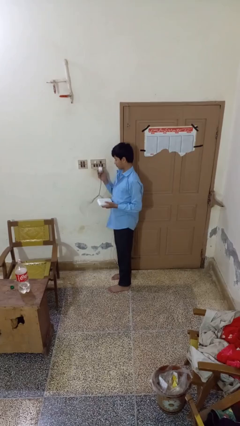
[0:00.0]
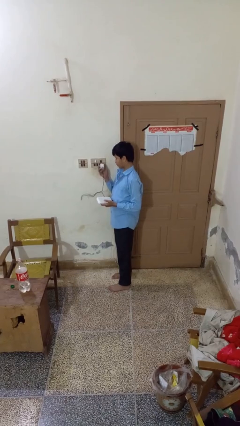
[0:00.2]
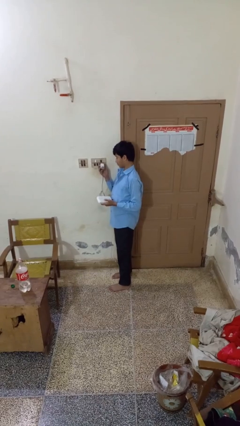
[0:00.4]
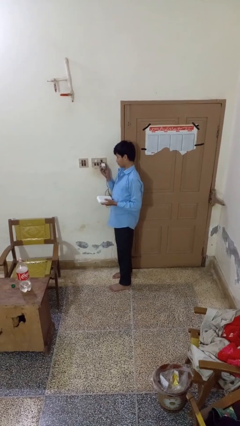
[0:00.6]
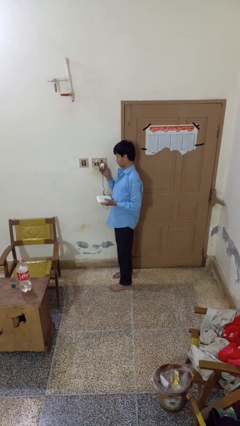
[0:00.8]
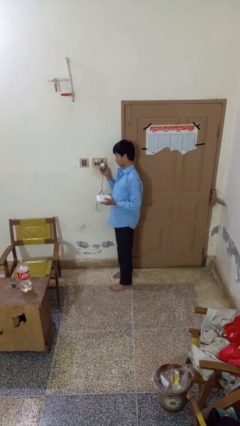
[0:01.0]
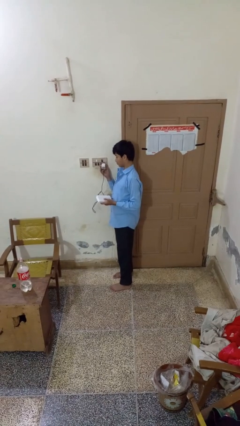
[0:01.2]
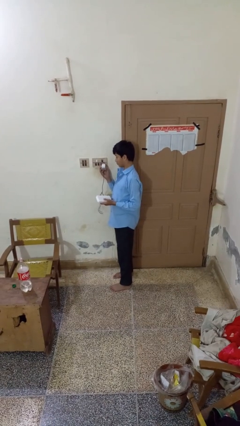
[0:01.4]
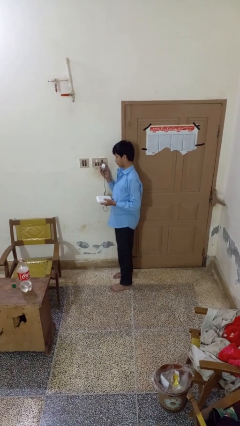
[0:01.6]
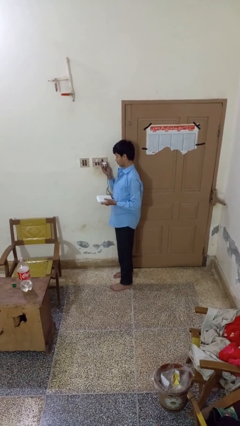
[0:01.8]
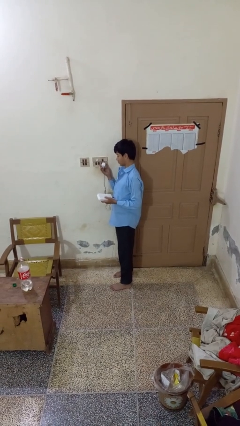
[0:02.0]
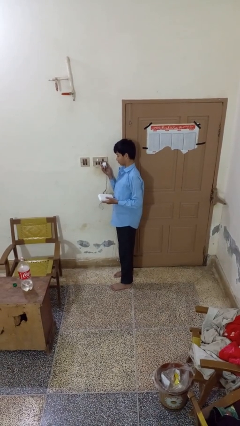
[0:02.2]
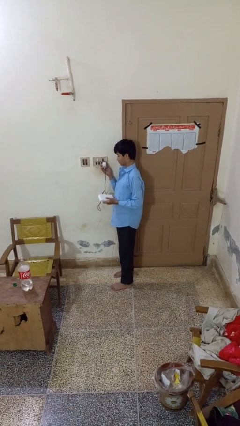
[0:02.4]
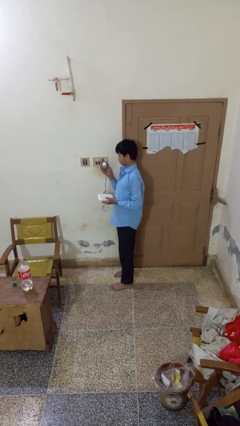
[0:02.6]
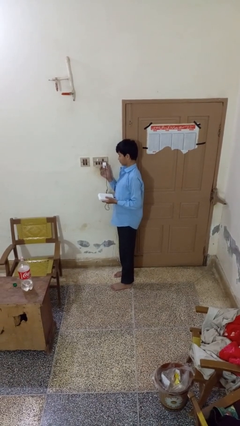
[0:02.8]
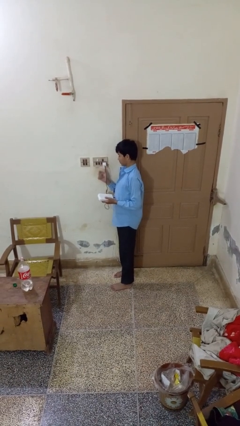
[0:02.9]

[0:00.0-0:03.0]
person plugs into electrical socket

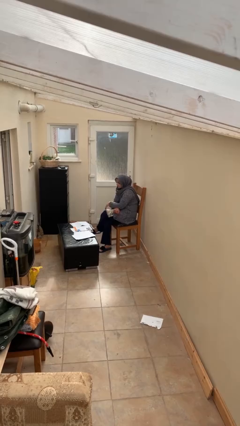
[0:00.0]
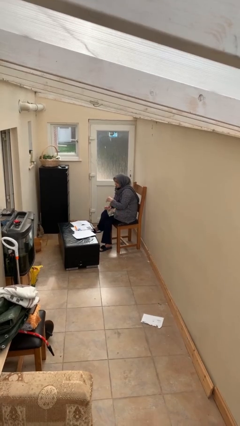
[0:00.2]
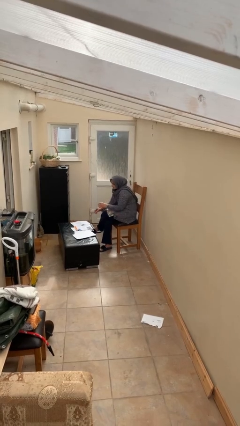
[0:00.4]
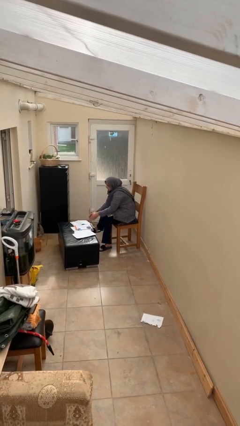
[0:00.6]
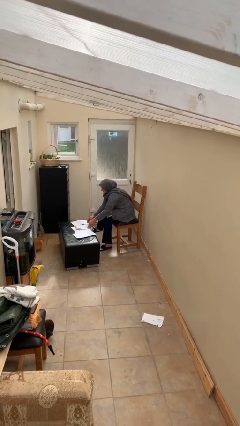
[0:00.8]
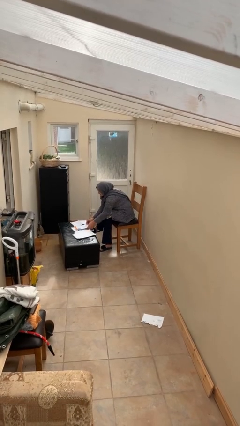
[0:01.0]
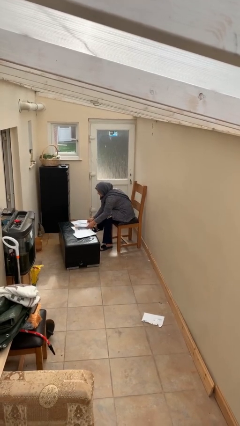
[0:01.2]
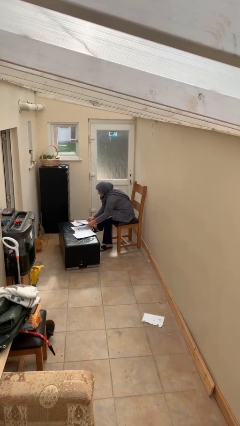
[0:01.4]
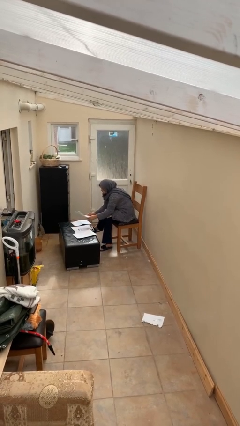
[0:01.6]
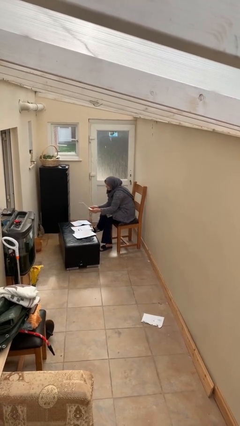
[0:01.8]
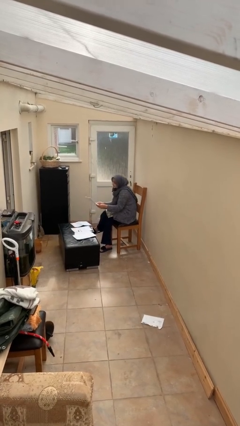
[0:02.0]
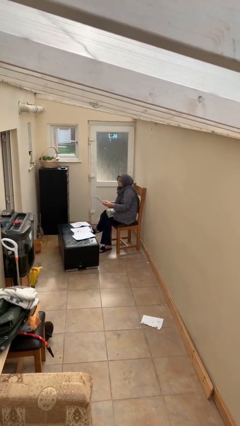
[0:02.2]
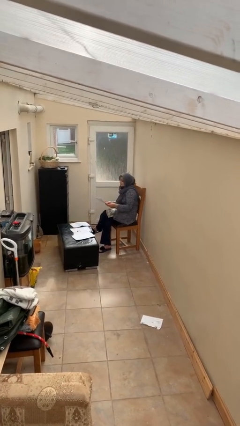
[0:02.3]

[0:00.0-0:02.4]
person picks up object from table

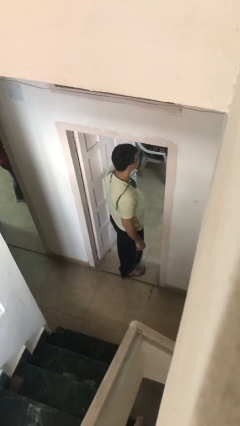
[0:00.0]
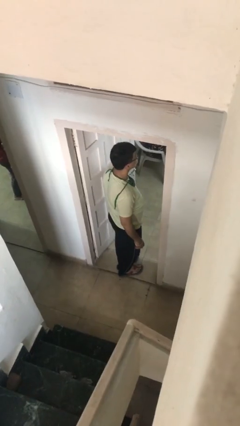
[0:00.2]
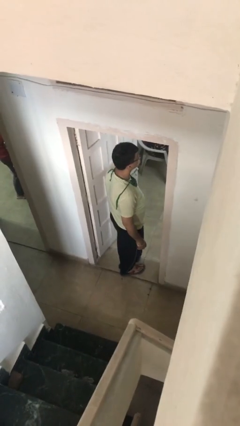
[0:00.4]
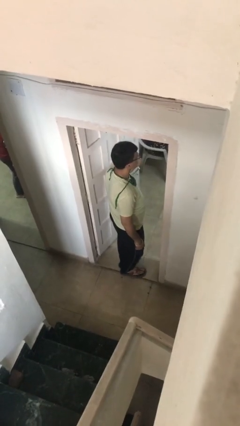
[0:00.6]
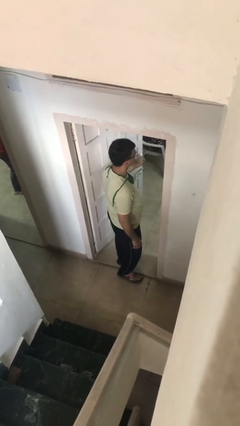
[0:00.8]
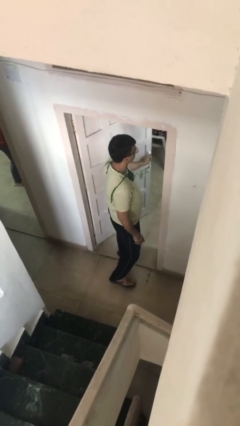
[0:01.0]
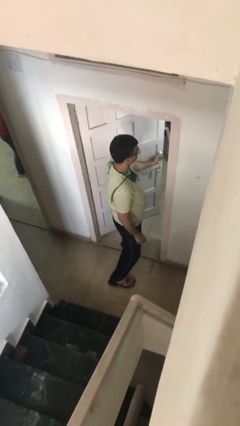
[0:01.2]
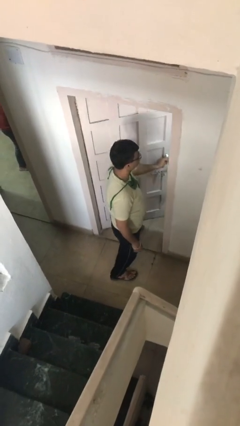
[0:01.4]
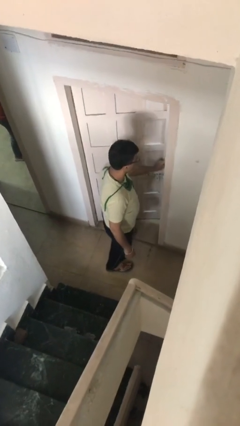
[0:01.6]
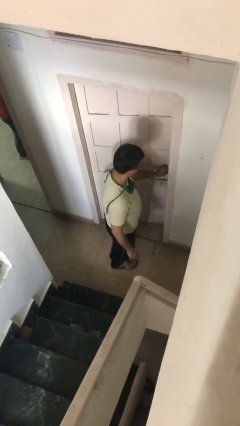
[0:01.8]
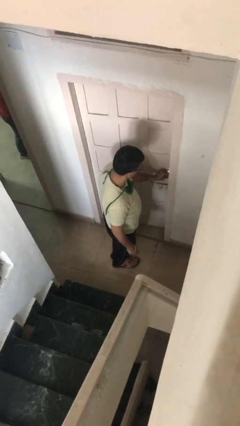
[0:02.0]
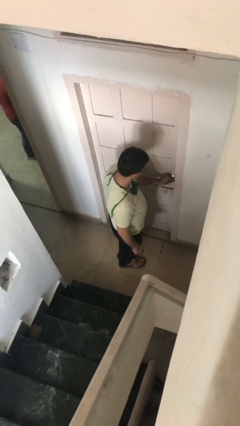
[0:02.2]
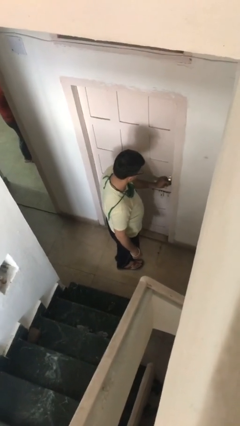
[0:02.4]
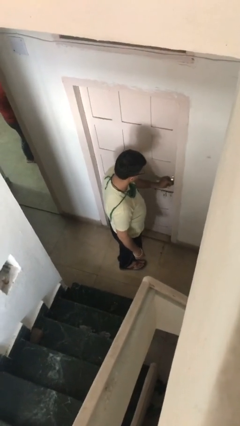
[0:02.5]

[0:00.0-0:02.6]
person closes facility door

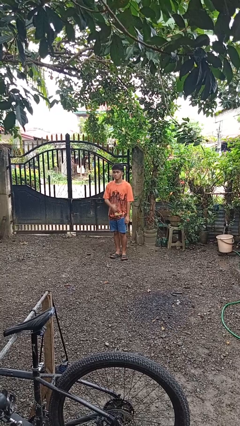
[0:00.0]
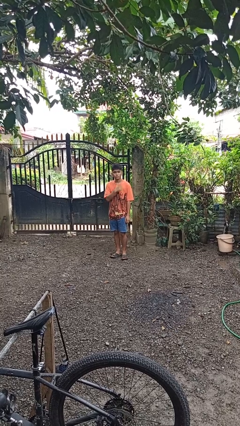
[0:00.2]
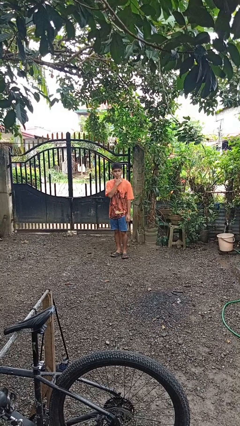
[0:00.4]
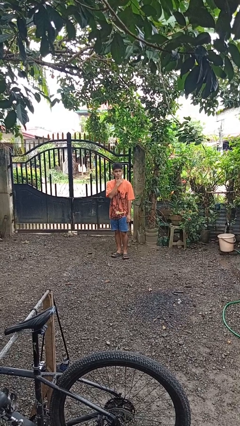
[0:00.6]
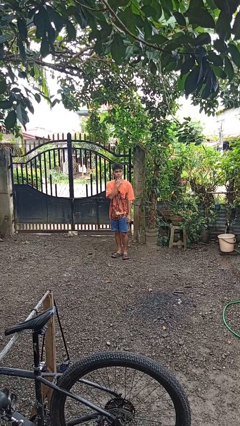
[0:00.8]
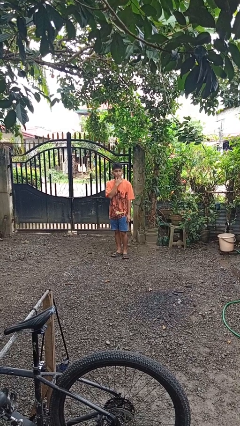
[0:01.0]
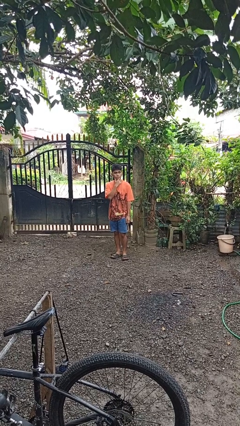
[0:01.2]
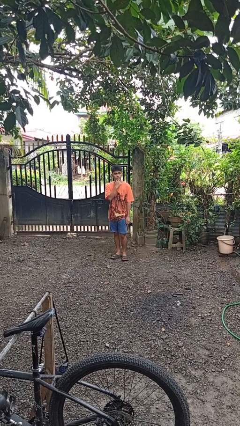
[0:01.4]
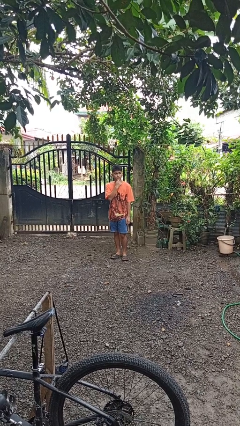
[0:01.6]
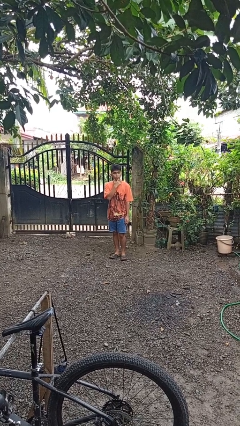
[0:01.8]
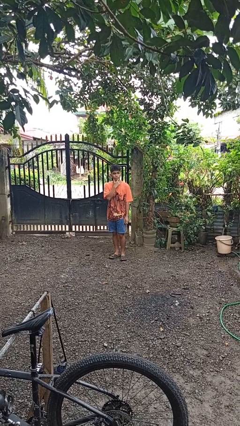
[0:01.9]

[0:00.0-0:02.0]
person strokes chin

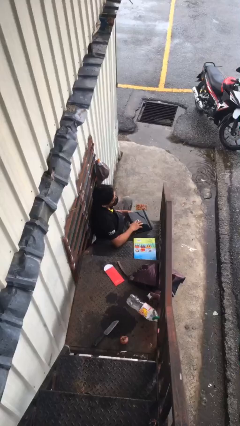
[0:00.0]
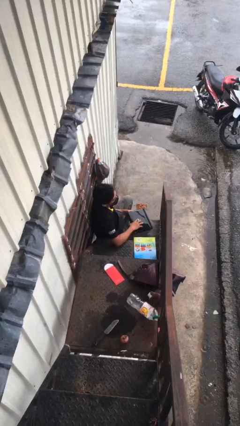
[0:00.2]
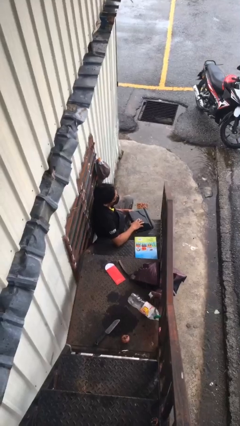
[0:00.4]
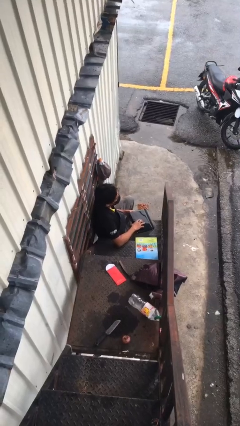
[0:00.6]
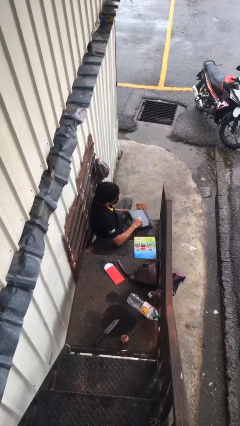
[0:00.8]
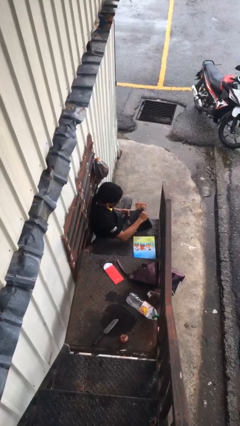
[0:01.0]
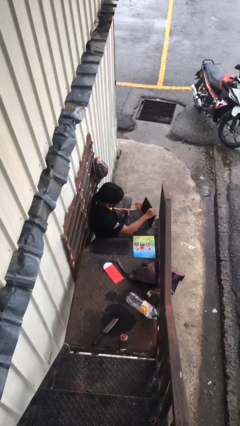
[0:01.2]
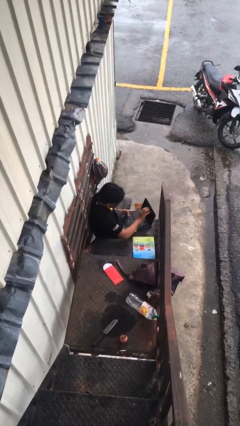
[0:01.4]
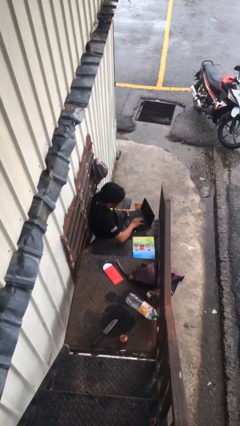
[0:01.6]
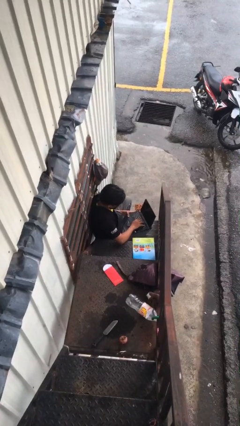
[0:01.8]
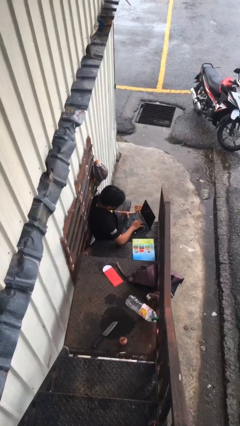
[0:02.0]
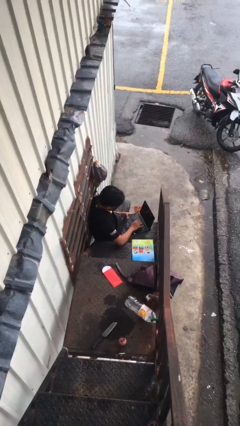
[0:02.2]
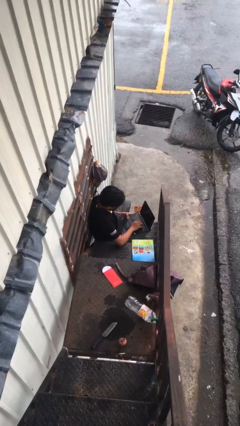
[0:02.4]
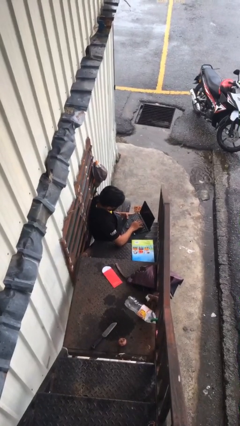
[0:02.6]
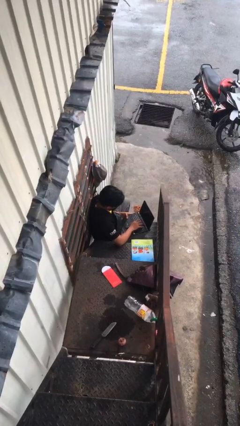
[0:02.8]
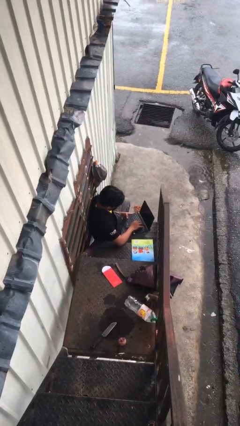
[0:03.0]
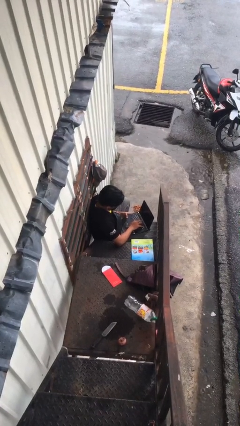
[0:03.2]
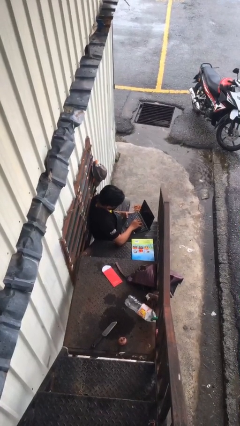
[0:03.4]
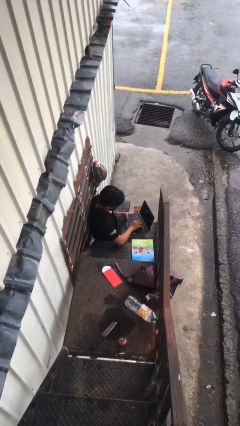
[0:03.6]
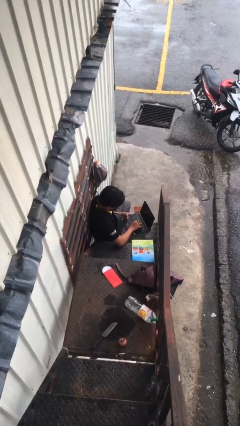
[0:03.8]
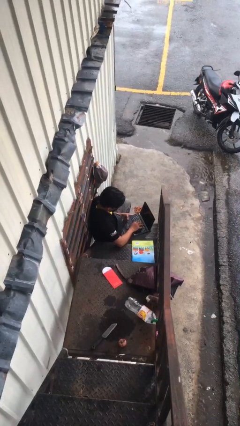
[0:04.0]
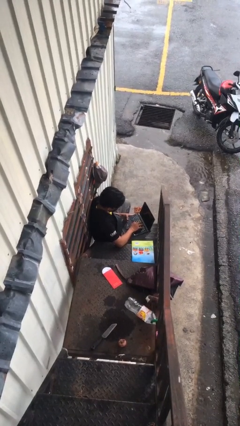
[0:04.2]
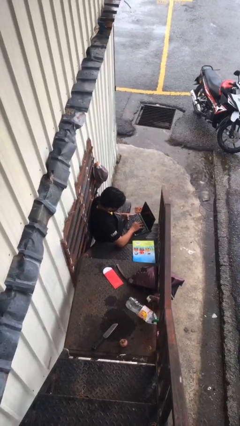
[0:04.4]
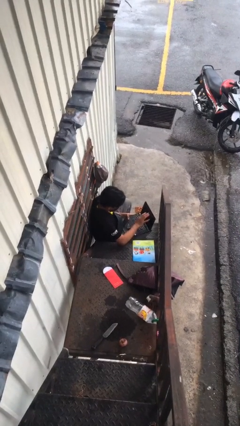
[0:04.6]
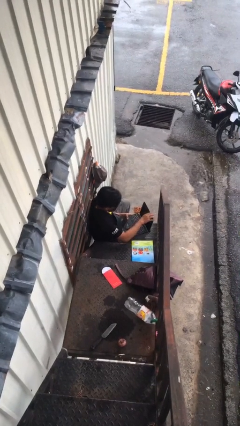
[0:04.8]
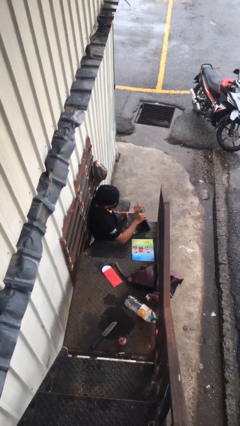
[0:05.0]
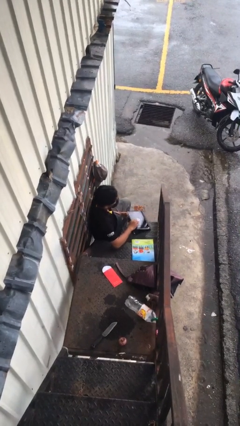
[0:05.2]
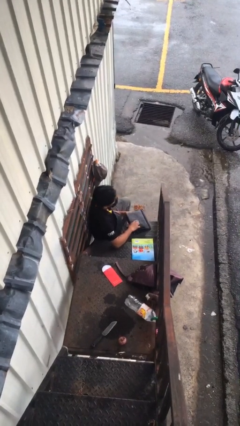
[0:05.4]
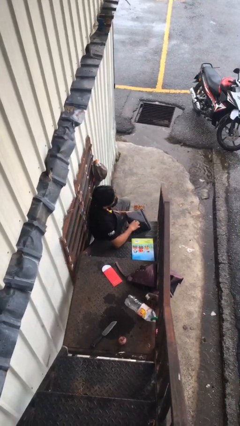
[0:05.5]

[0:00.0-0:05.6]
person interacts with laptop

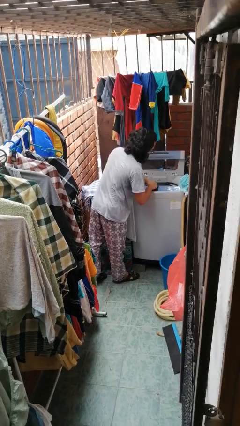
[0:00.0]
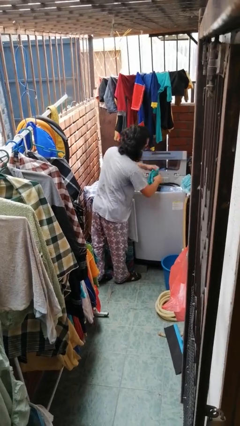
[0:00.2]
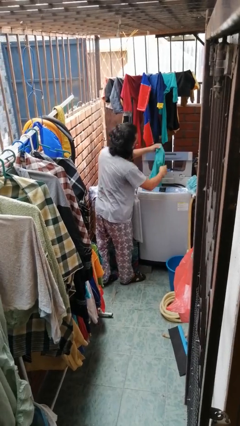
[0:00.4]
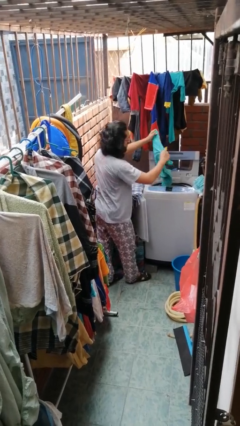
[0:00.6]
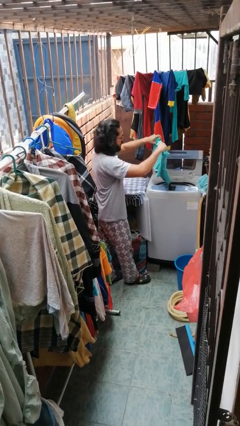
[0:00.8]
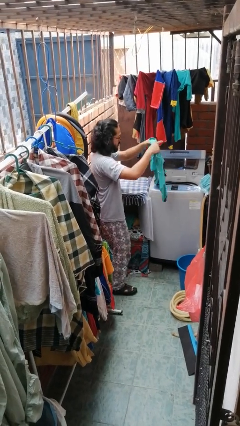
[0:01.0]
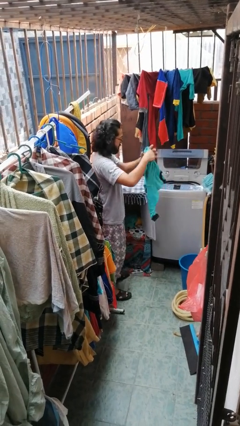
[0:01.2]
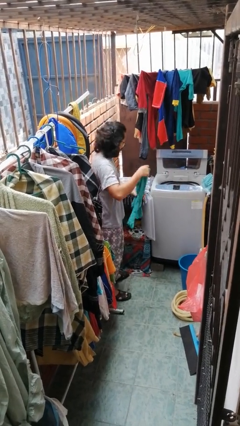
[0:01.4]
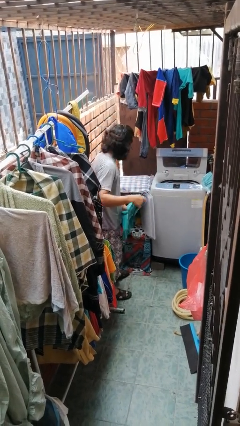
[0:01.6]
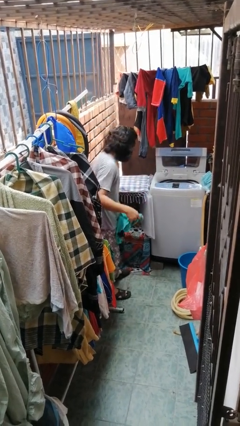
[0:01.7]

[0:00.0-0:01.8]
person unloads clotheswasher

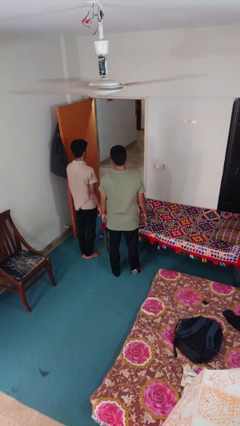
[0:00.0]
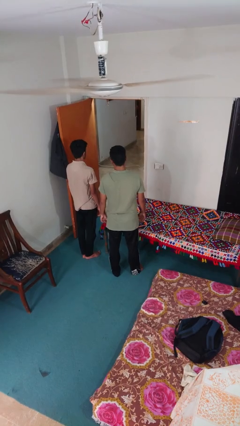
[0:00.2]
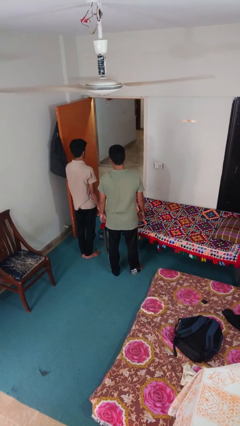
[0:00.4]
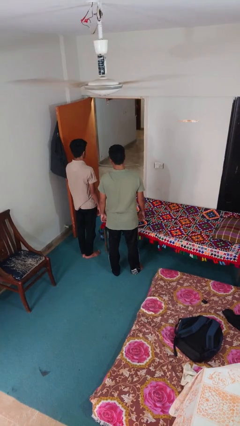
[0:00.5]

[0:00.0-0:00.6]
person nudges person with elbow
